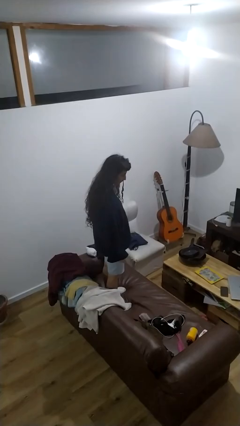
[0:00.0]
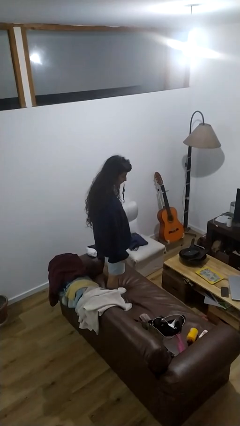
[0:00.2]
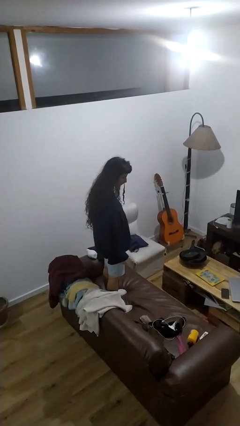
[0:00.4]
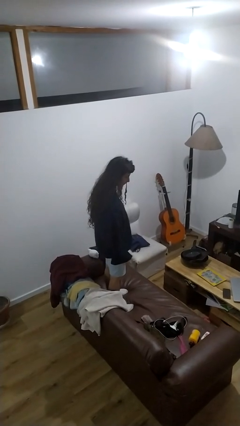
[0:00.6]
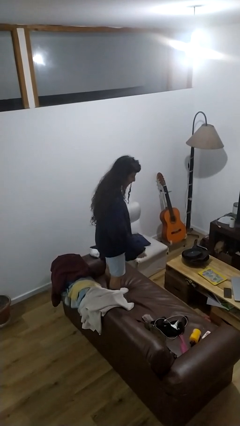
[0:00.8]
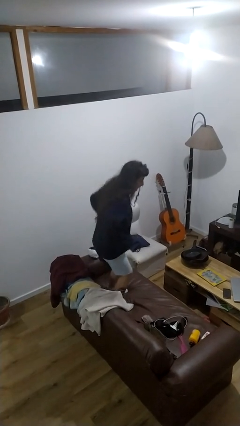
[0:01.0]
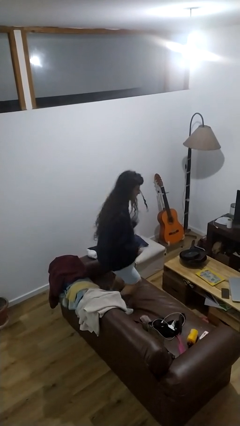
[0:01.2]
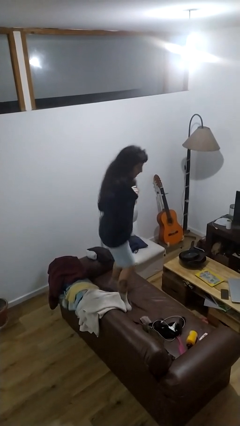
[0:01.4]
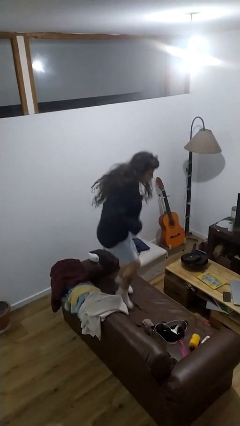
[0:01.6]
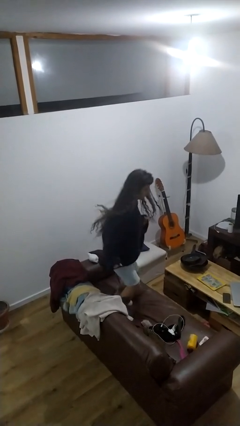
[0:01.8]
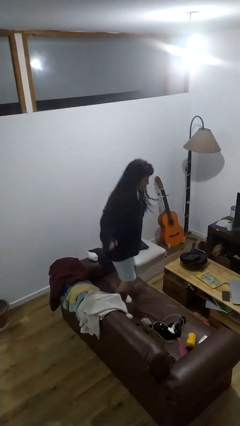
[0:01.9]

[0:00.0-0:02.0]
person jumps on couch

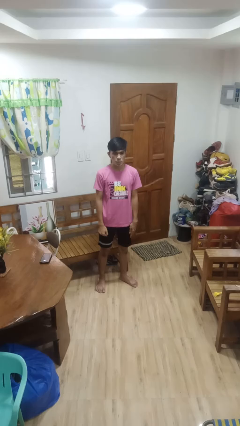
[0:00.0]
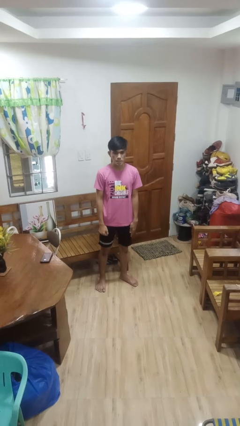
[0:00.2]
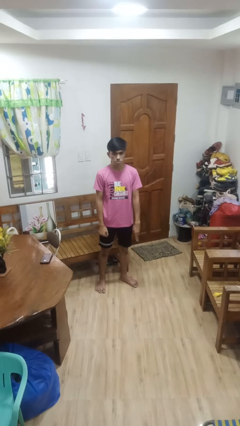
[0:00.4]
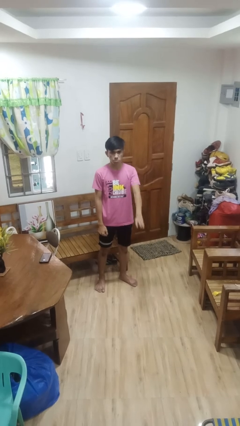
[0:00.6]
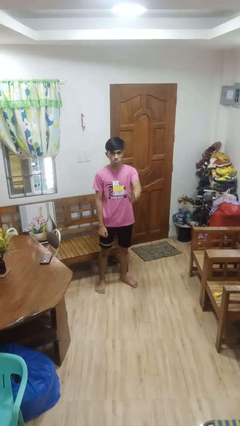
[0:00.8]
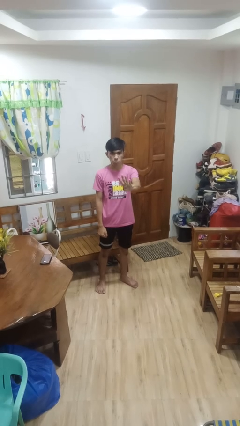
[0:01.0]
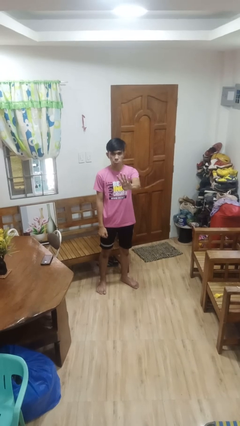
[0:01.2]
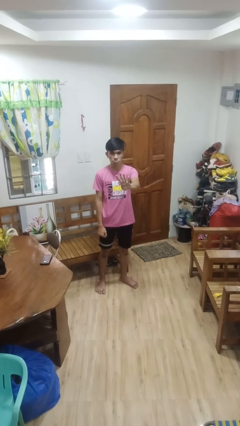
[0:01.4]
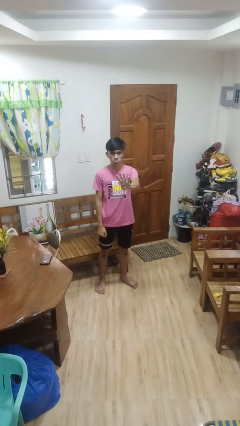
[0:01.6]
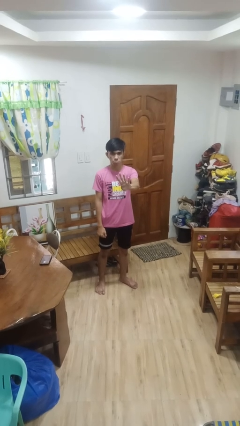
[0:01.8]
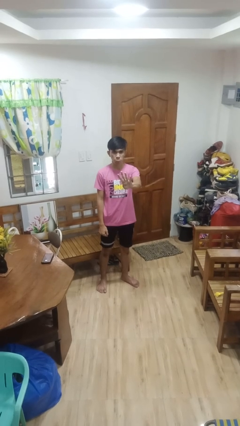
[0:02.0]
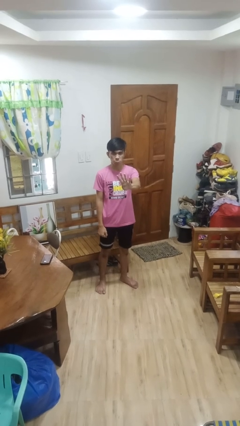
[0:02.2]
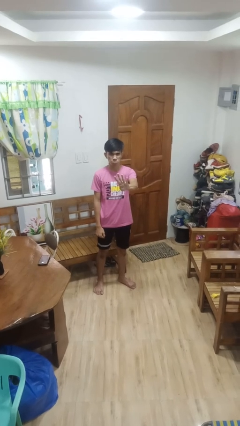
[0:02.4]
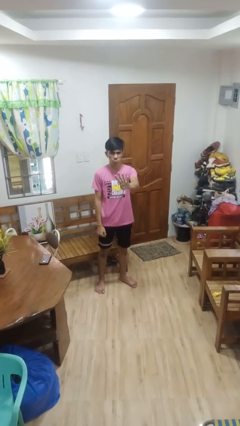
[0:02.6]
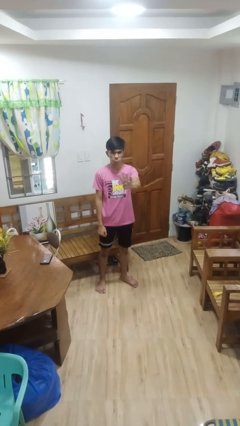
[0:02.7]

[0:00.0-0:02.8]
person gestures number four

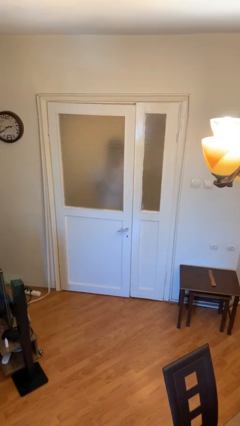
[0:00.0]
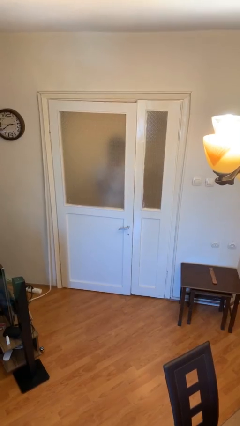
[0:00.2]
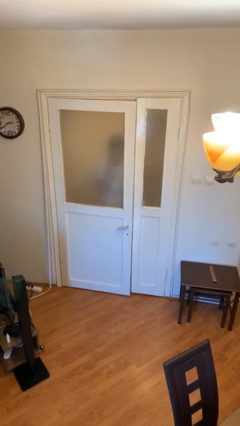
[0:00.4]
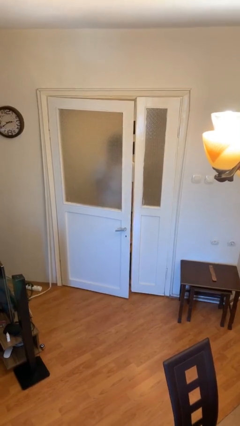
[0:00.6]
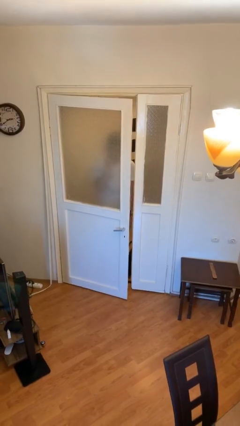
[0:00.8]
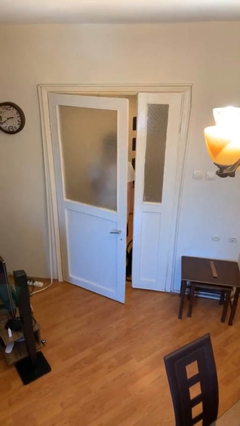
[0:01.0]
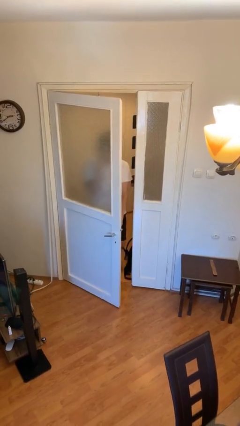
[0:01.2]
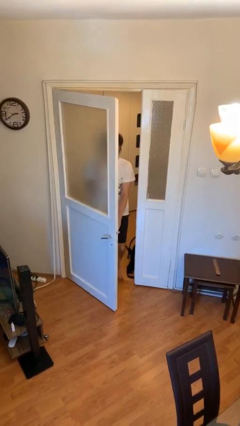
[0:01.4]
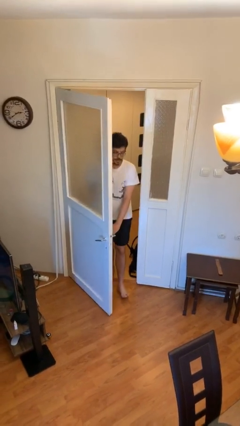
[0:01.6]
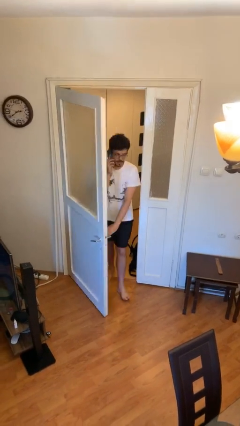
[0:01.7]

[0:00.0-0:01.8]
person opens facility door

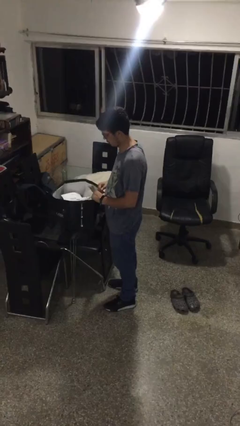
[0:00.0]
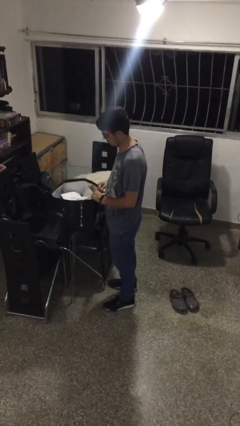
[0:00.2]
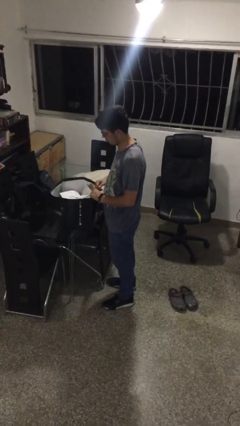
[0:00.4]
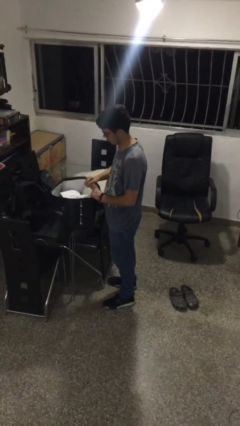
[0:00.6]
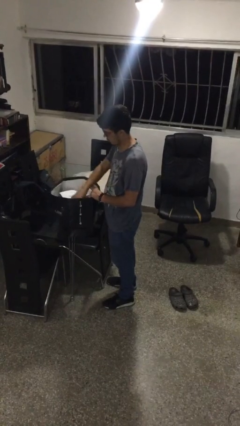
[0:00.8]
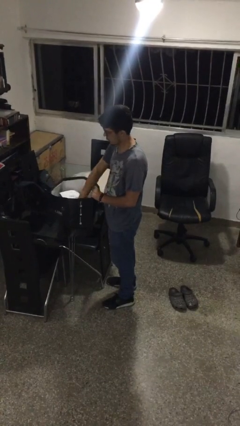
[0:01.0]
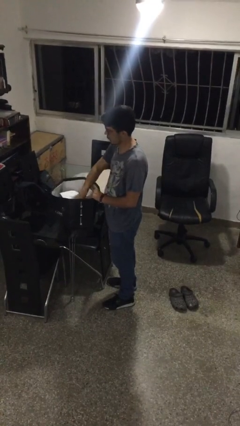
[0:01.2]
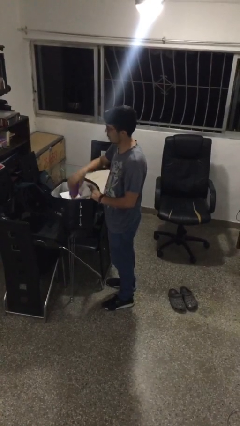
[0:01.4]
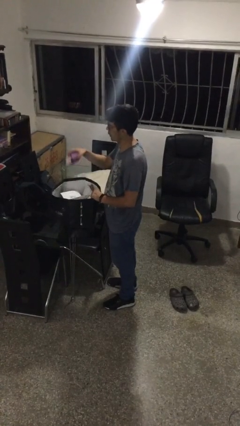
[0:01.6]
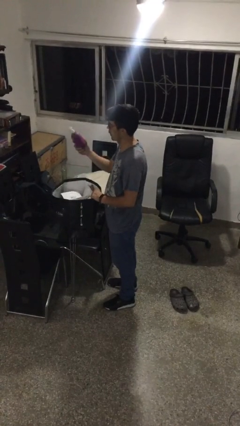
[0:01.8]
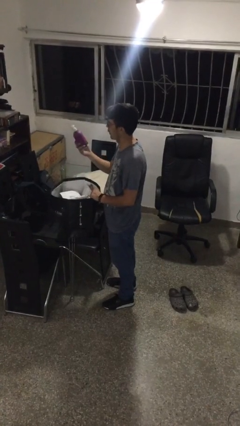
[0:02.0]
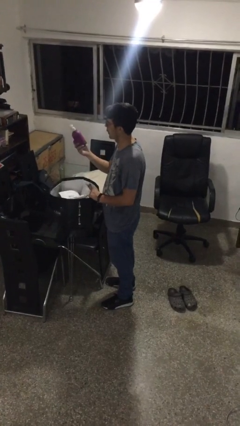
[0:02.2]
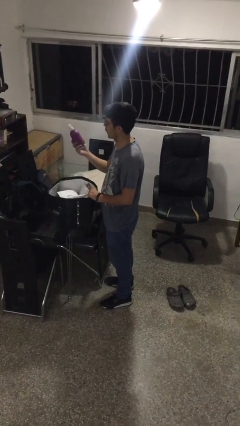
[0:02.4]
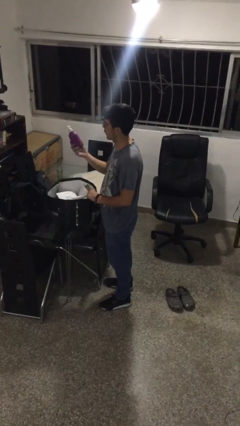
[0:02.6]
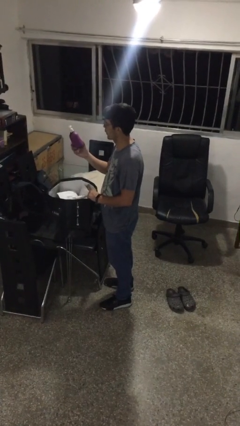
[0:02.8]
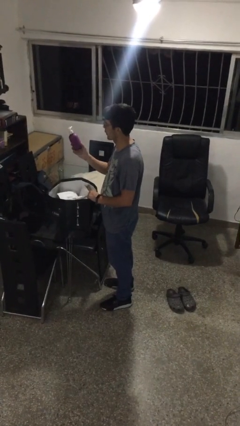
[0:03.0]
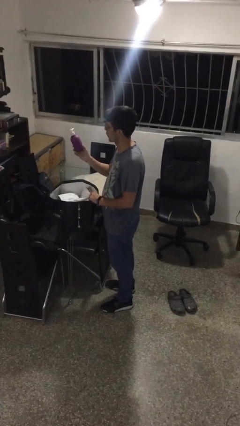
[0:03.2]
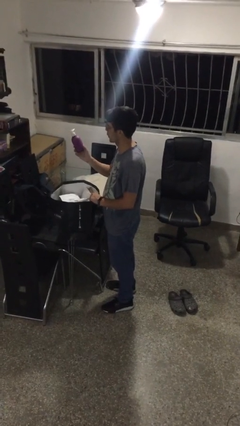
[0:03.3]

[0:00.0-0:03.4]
person takes object from bag

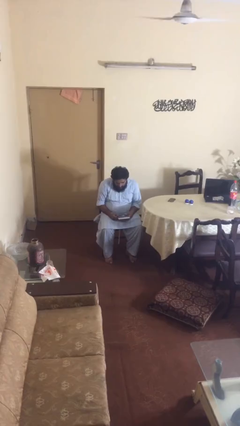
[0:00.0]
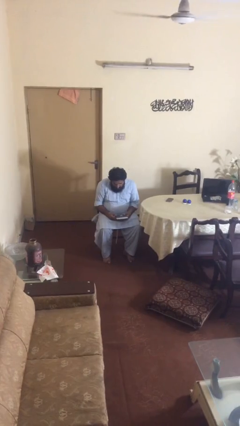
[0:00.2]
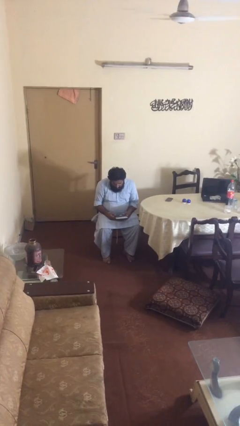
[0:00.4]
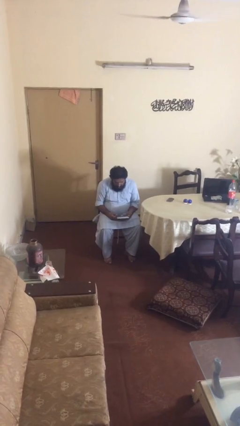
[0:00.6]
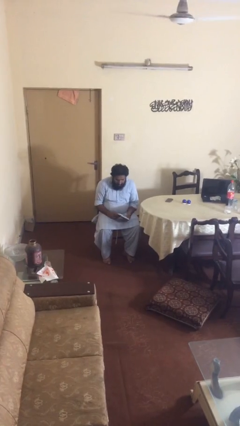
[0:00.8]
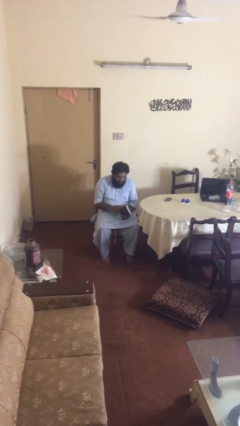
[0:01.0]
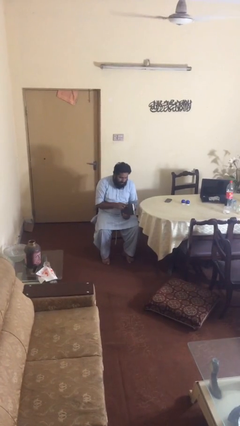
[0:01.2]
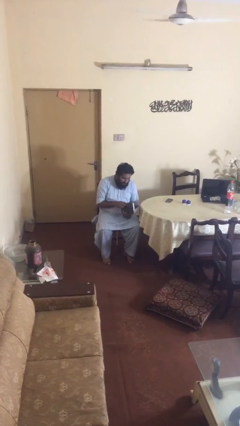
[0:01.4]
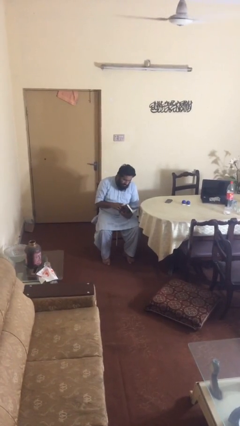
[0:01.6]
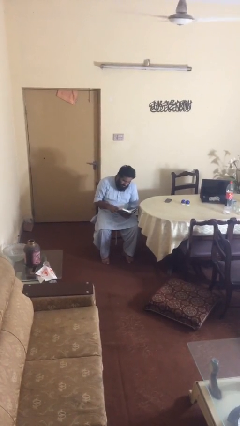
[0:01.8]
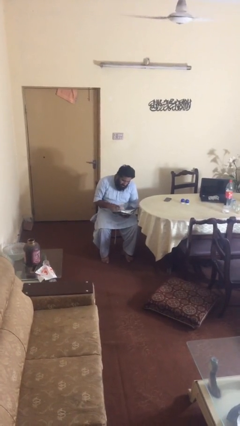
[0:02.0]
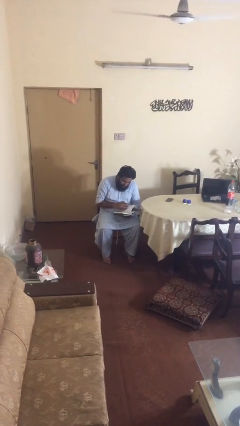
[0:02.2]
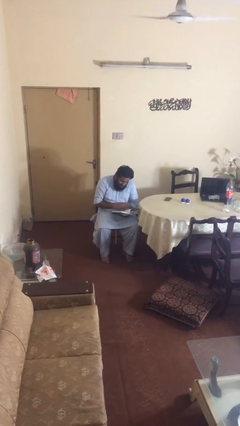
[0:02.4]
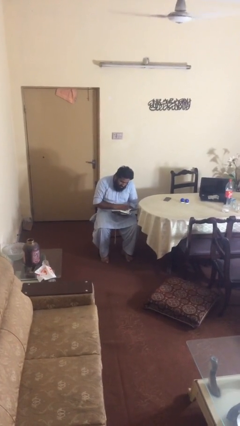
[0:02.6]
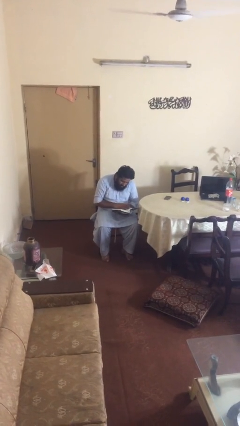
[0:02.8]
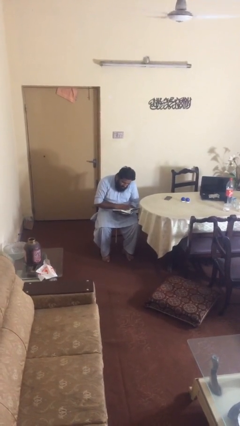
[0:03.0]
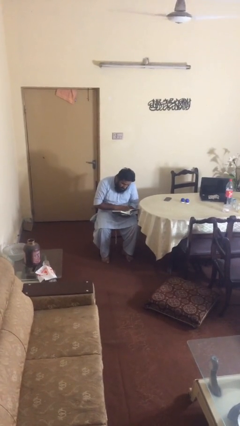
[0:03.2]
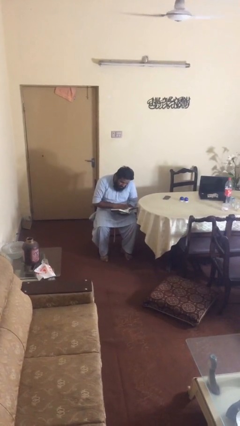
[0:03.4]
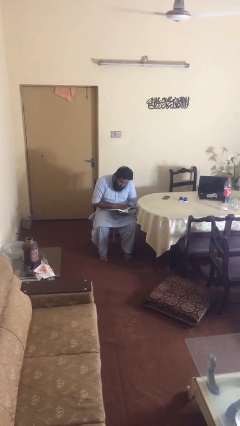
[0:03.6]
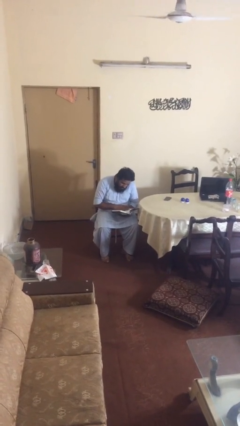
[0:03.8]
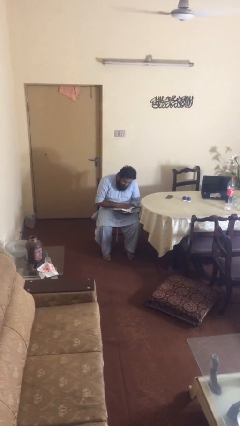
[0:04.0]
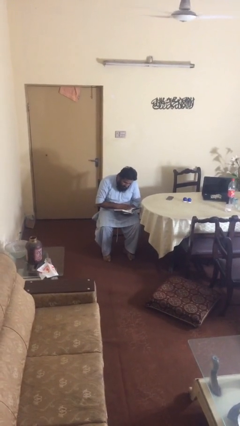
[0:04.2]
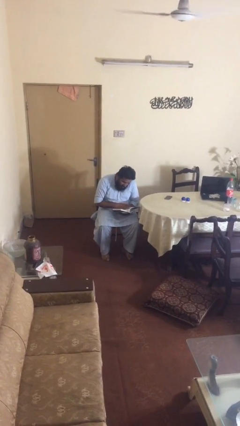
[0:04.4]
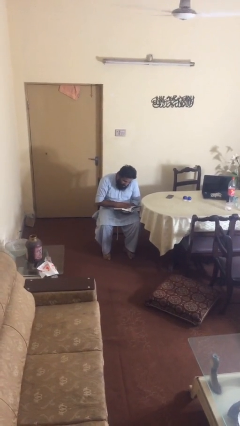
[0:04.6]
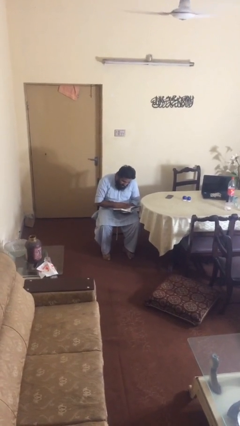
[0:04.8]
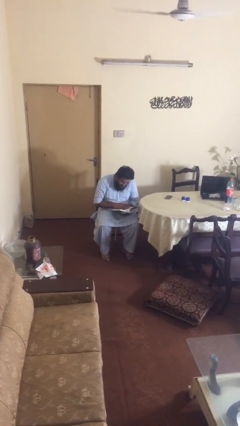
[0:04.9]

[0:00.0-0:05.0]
person reads document

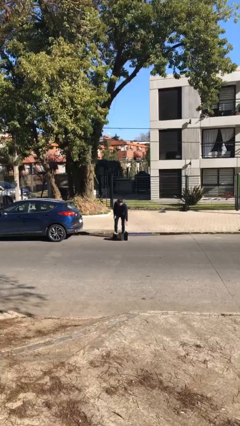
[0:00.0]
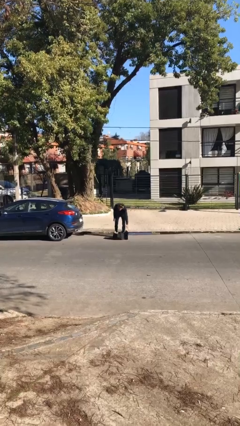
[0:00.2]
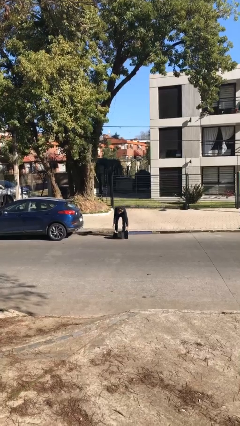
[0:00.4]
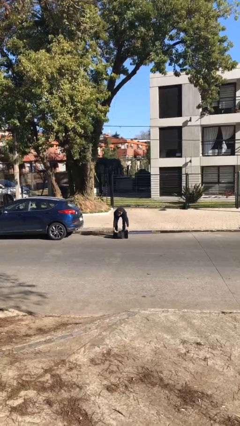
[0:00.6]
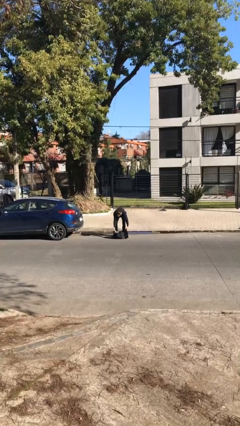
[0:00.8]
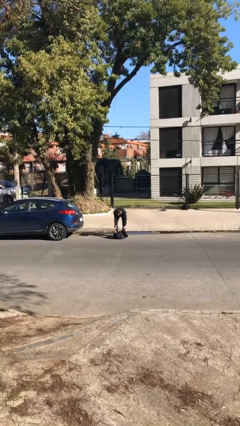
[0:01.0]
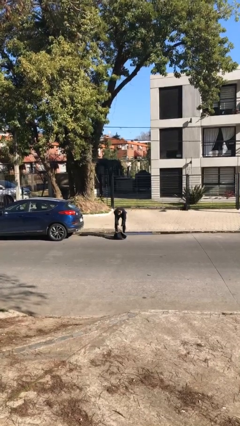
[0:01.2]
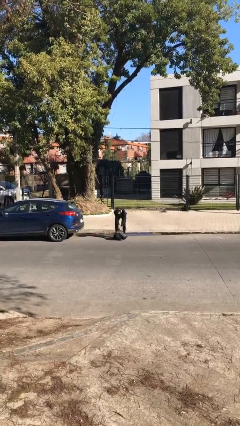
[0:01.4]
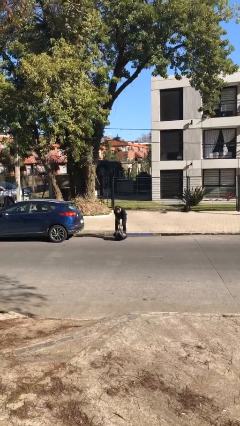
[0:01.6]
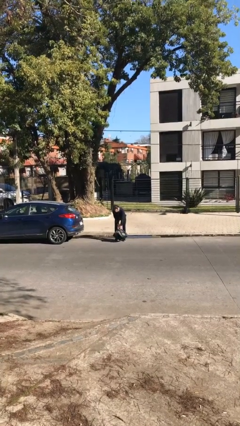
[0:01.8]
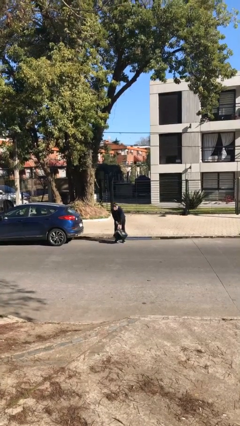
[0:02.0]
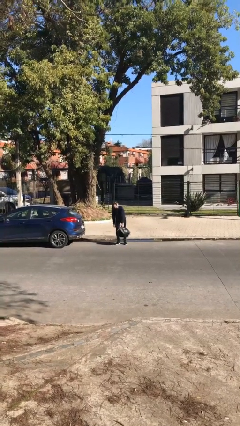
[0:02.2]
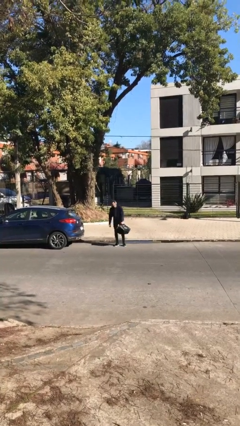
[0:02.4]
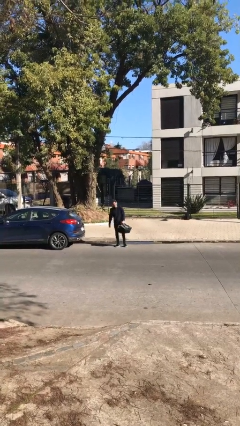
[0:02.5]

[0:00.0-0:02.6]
person picks up object from floor
